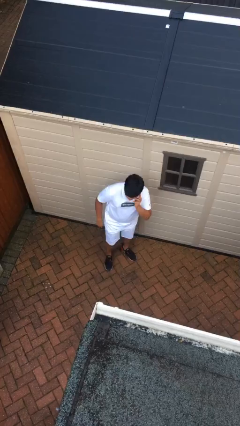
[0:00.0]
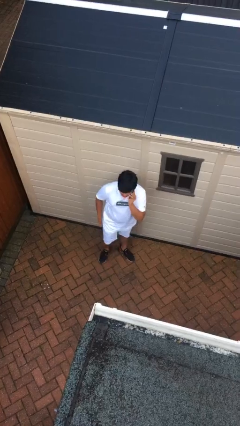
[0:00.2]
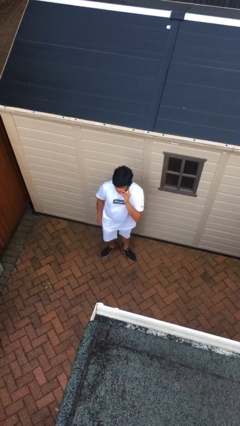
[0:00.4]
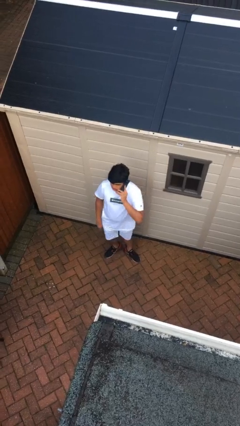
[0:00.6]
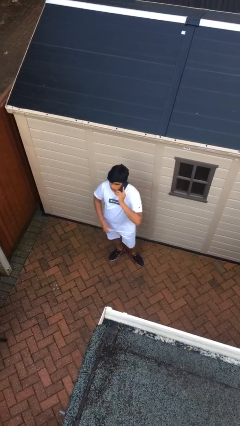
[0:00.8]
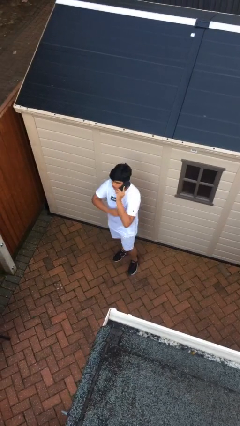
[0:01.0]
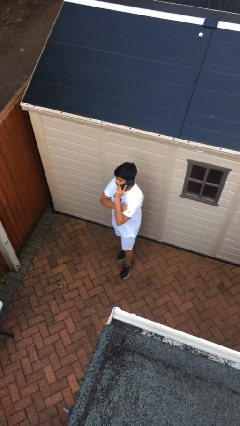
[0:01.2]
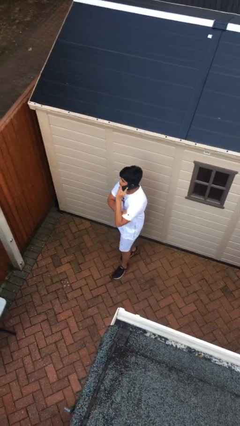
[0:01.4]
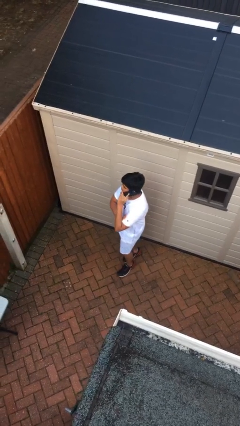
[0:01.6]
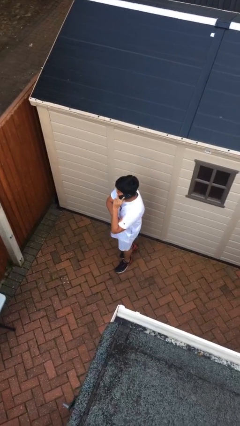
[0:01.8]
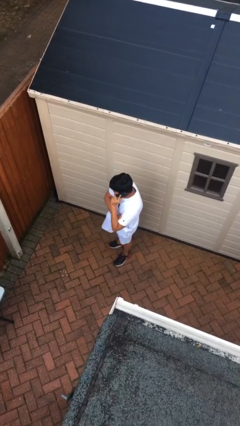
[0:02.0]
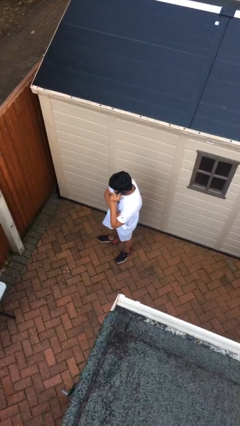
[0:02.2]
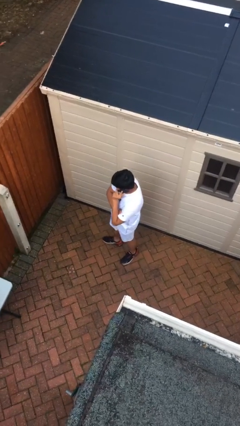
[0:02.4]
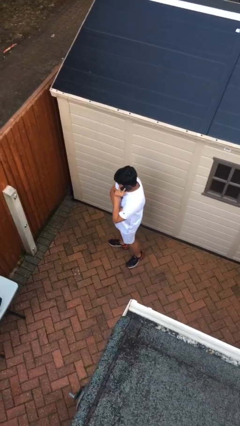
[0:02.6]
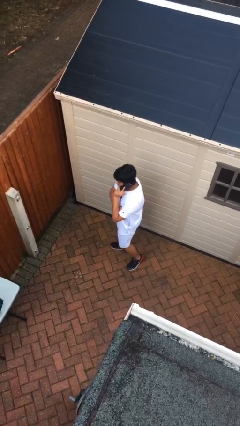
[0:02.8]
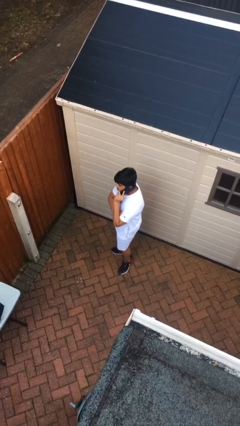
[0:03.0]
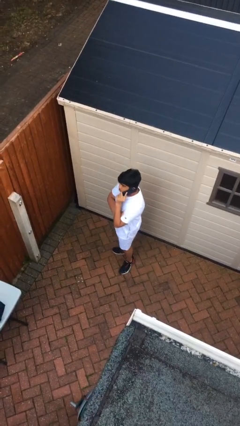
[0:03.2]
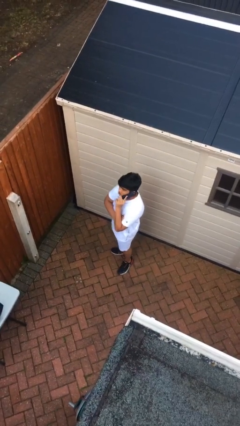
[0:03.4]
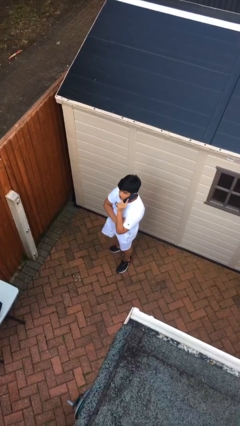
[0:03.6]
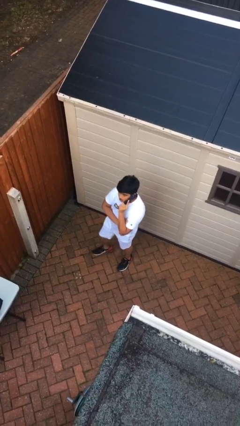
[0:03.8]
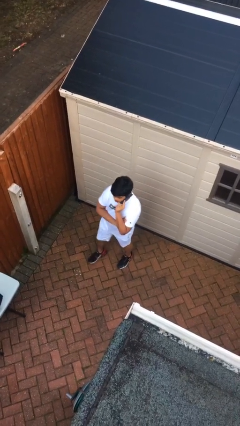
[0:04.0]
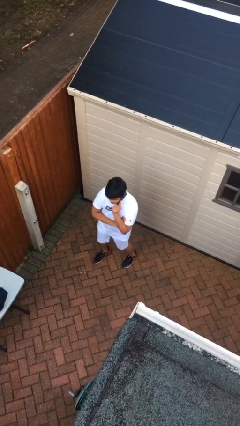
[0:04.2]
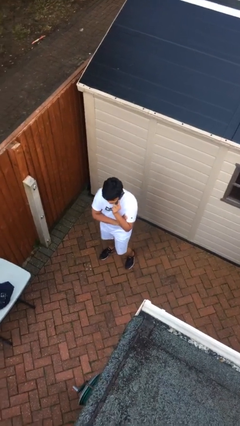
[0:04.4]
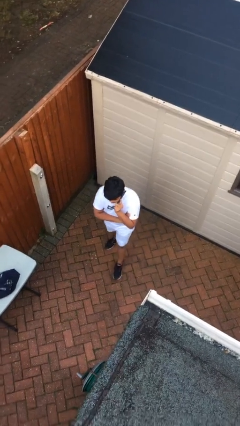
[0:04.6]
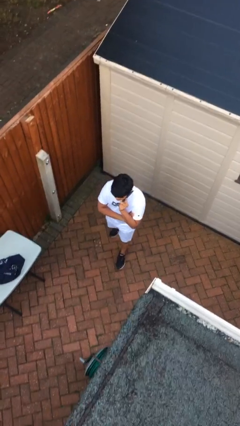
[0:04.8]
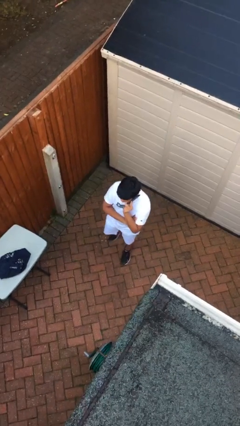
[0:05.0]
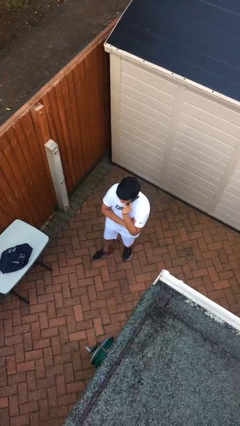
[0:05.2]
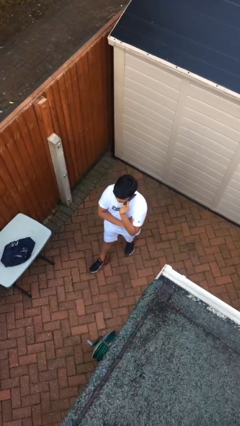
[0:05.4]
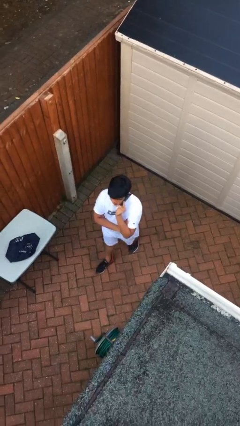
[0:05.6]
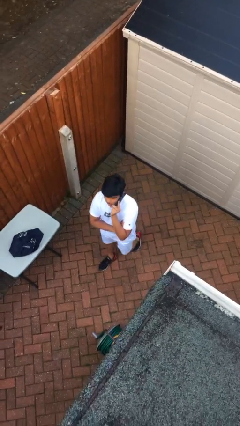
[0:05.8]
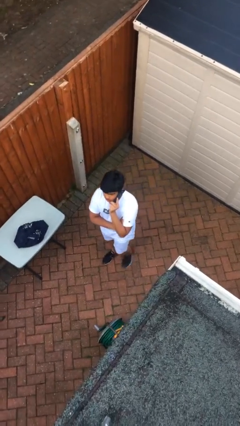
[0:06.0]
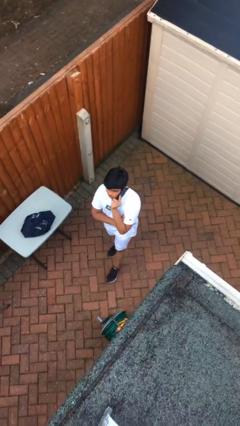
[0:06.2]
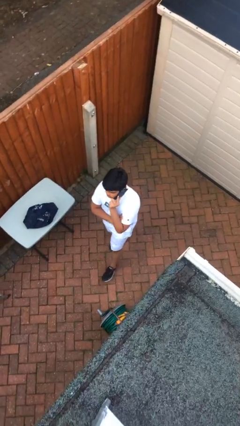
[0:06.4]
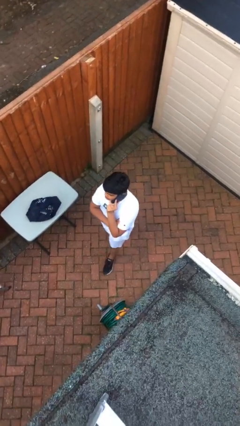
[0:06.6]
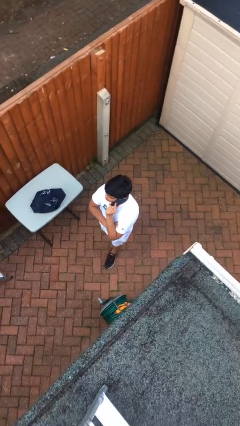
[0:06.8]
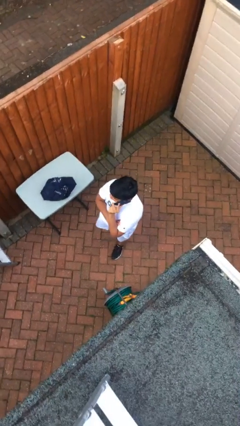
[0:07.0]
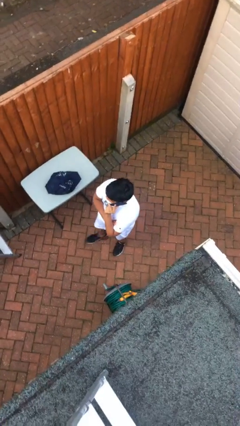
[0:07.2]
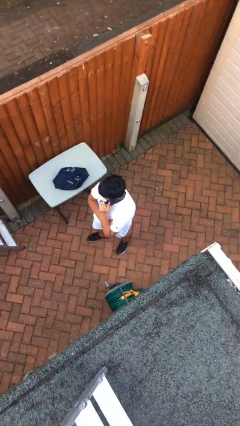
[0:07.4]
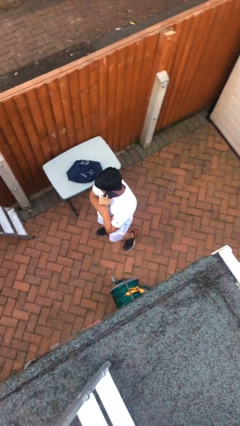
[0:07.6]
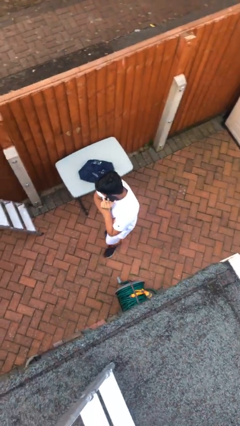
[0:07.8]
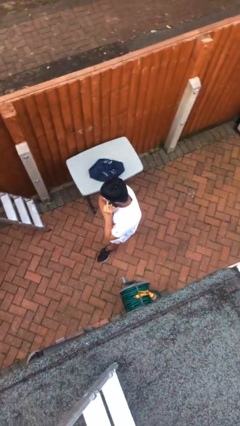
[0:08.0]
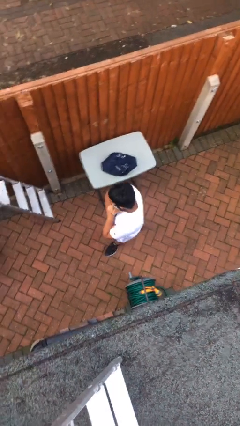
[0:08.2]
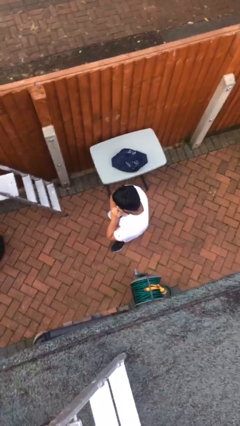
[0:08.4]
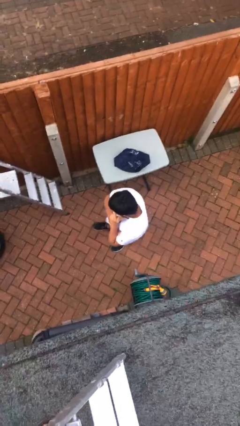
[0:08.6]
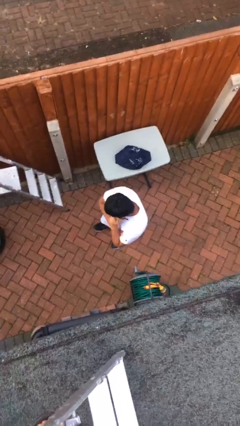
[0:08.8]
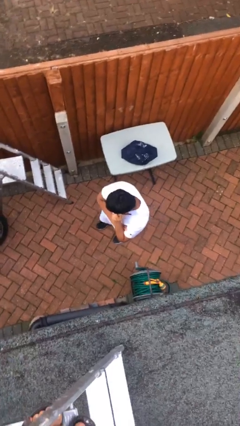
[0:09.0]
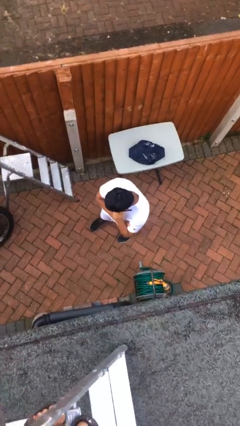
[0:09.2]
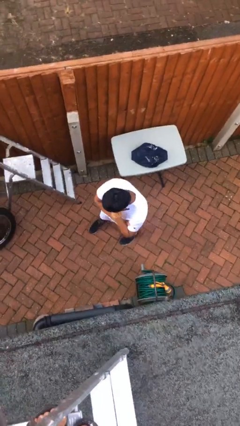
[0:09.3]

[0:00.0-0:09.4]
person talks on phone

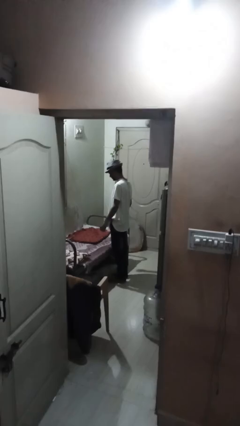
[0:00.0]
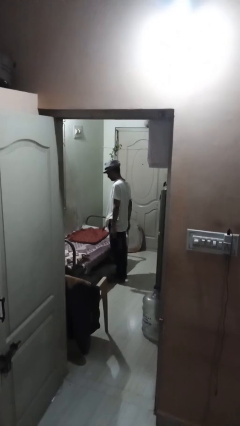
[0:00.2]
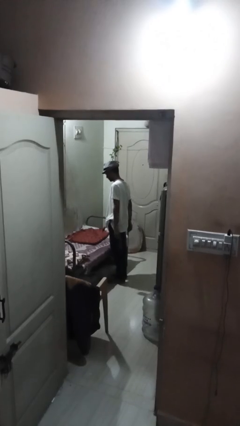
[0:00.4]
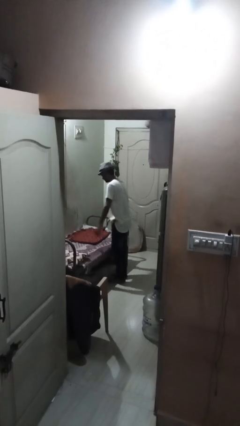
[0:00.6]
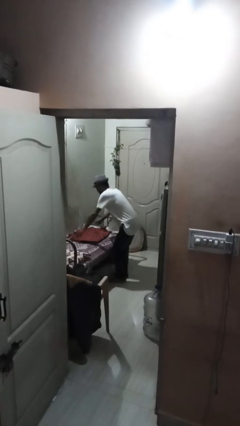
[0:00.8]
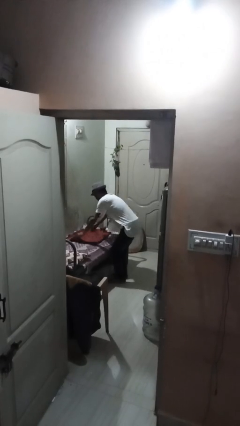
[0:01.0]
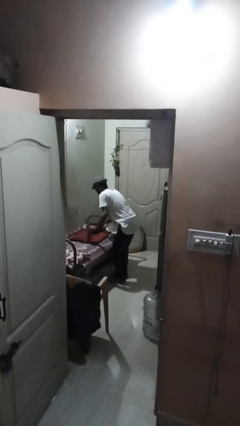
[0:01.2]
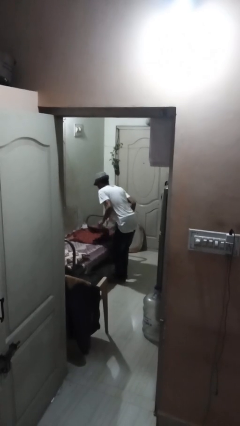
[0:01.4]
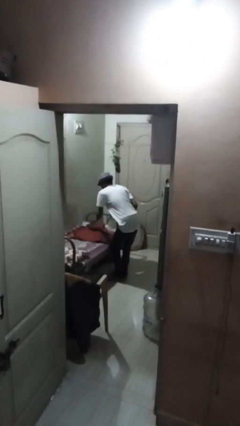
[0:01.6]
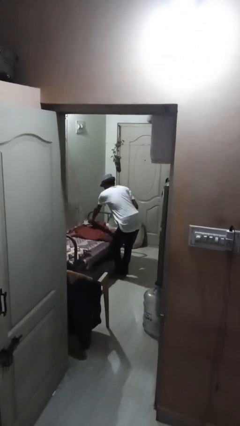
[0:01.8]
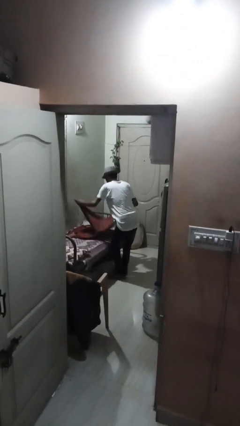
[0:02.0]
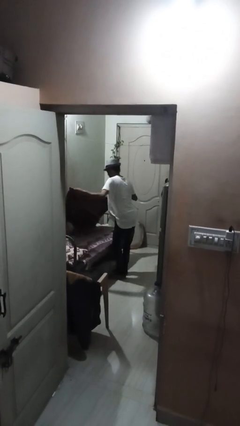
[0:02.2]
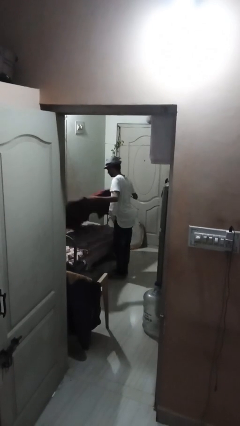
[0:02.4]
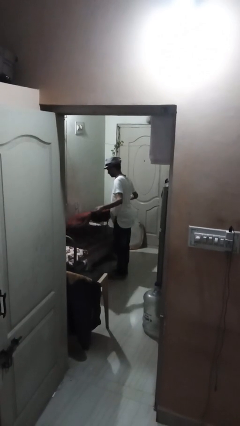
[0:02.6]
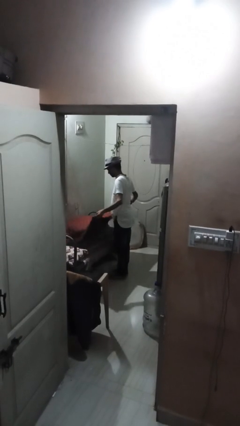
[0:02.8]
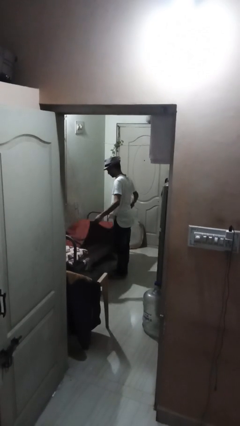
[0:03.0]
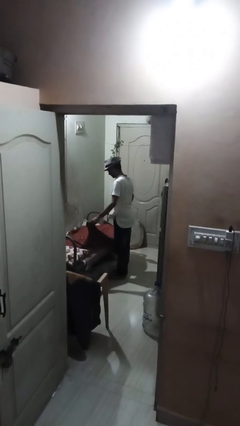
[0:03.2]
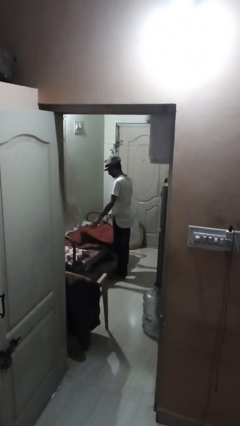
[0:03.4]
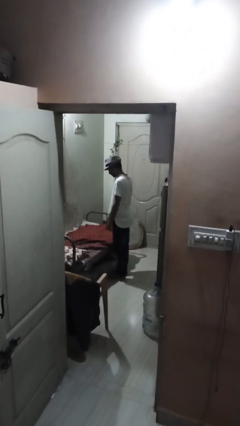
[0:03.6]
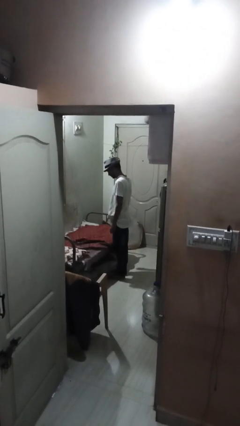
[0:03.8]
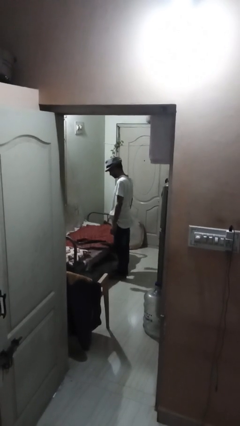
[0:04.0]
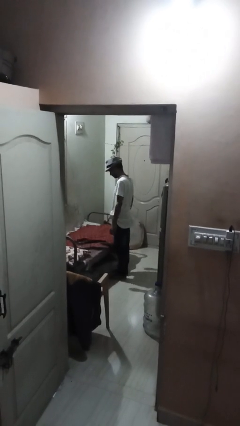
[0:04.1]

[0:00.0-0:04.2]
person unfolds blanket

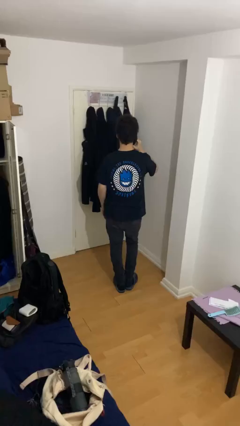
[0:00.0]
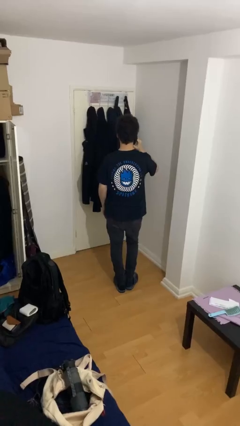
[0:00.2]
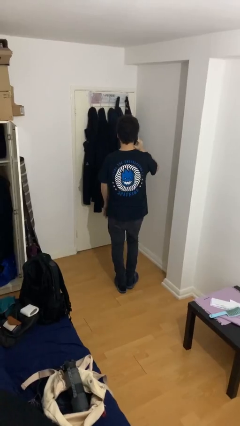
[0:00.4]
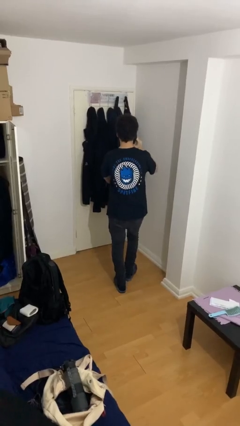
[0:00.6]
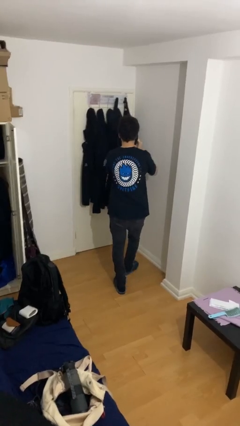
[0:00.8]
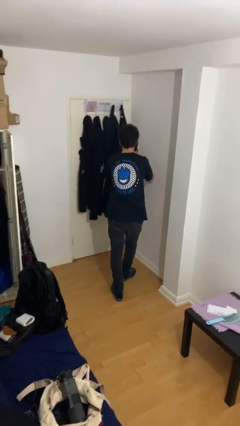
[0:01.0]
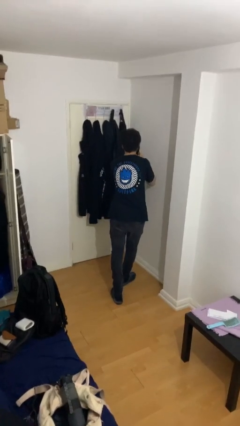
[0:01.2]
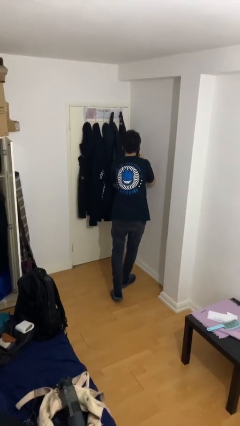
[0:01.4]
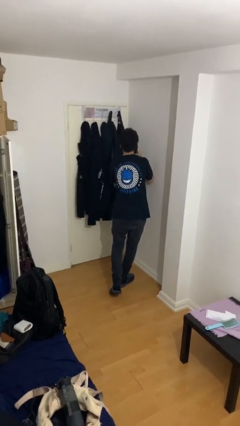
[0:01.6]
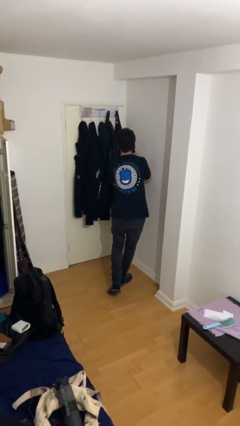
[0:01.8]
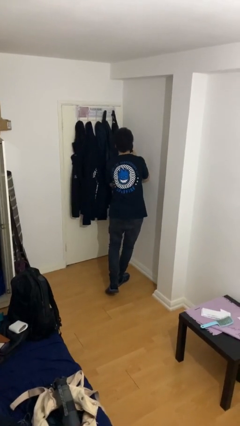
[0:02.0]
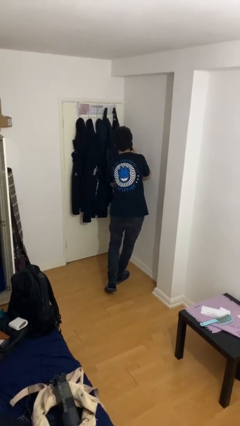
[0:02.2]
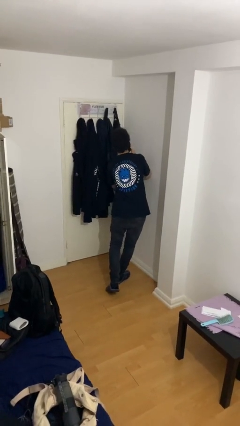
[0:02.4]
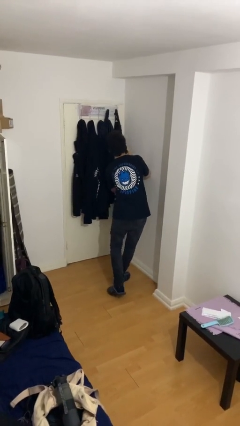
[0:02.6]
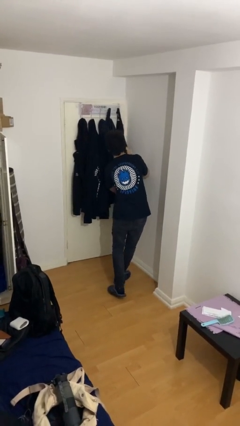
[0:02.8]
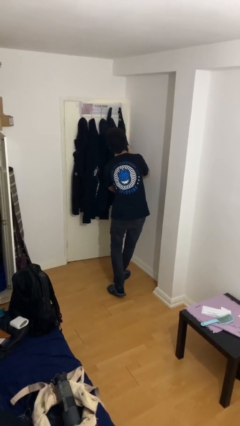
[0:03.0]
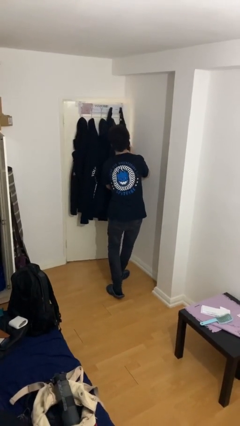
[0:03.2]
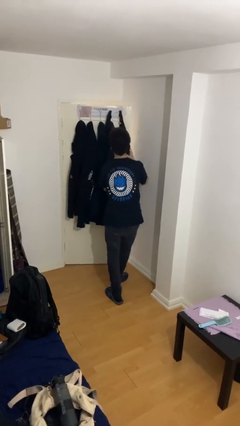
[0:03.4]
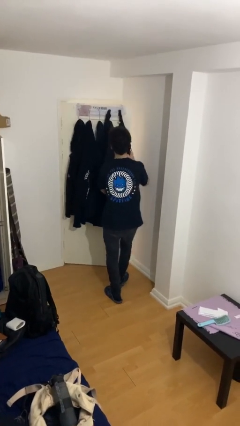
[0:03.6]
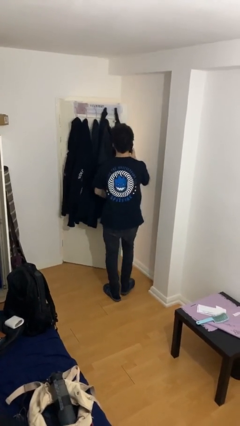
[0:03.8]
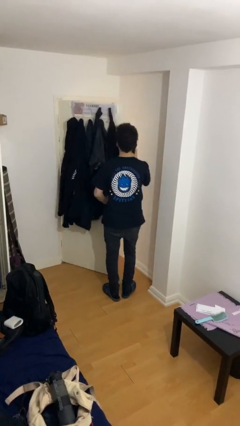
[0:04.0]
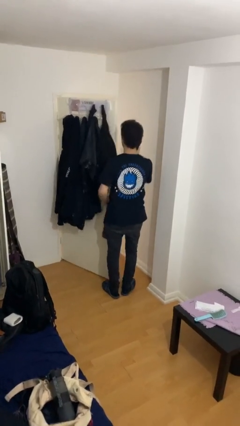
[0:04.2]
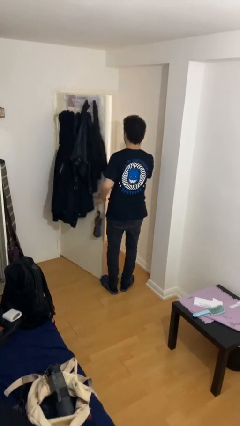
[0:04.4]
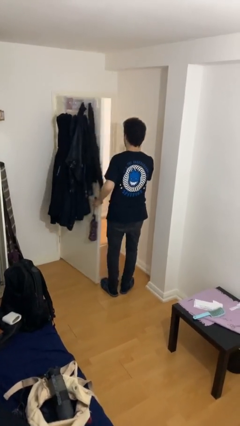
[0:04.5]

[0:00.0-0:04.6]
person opens facility door
